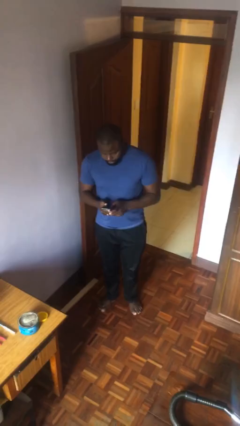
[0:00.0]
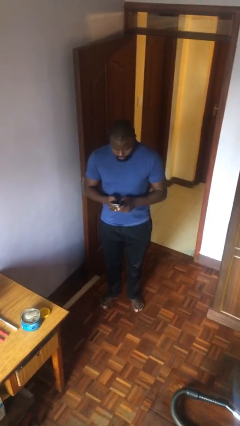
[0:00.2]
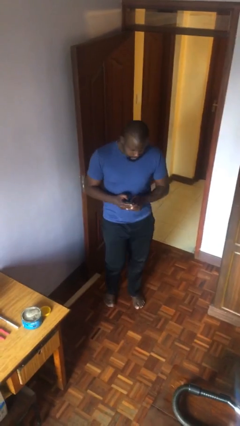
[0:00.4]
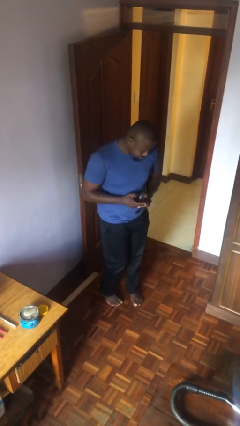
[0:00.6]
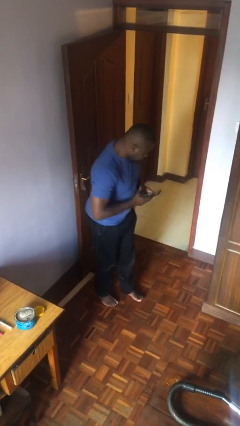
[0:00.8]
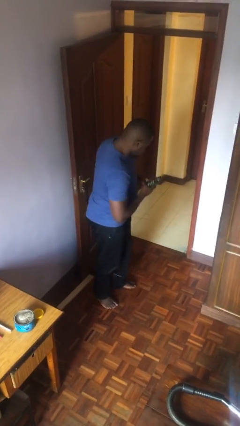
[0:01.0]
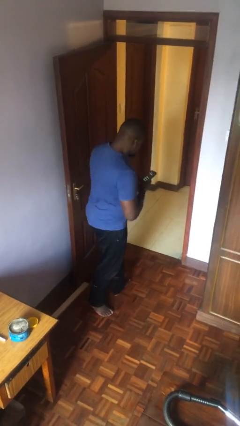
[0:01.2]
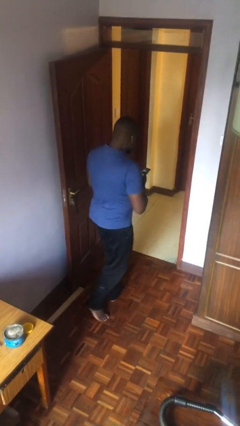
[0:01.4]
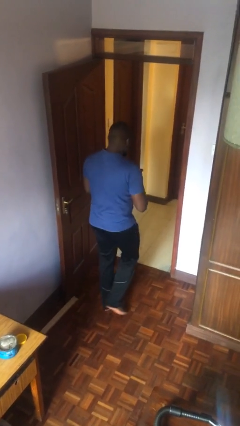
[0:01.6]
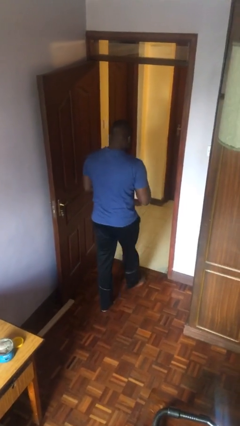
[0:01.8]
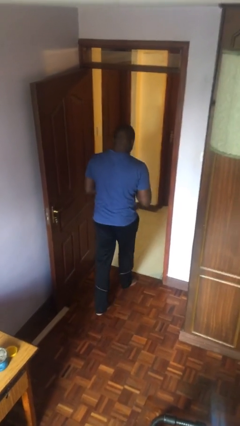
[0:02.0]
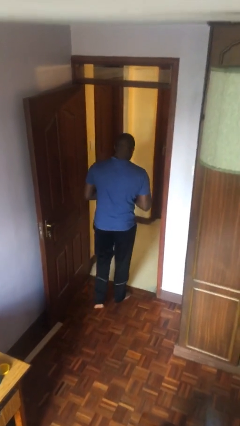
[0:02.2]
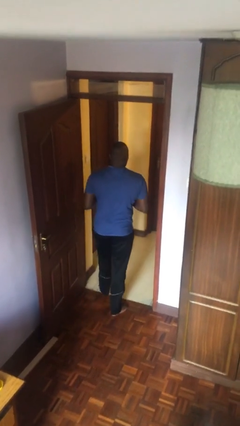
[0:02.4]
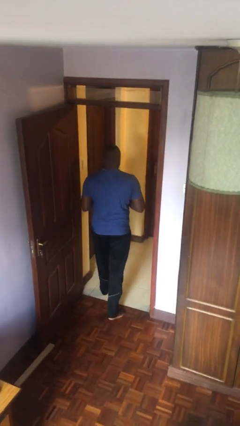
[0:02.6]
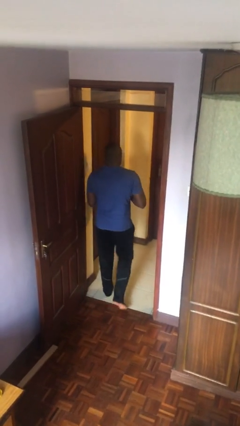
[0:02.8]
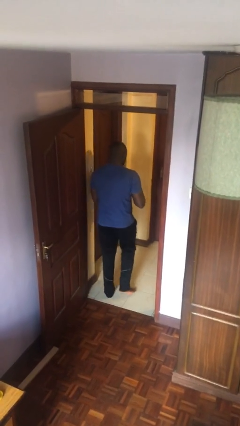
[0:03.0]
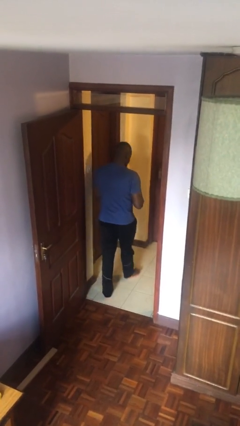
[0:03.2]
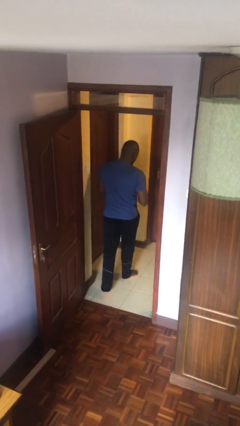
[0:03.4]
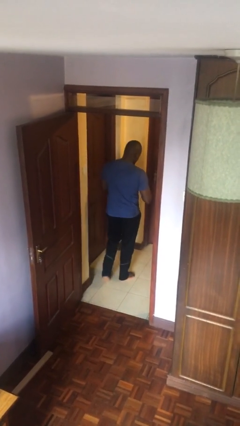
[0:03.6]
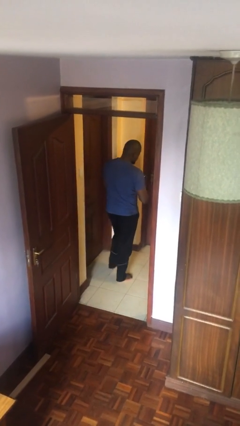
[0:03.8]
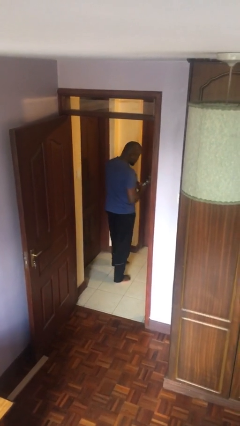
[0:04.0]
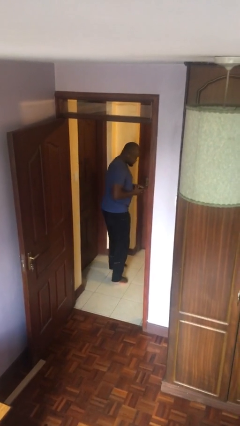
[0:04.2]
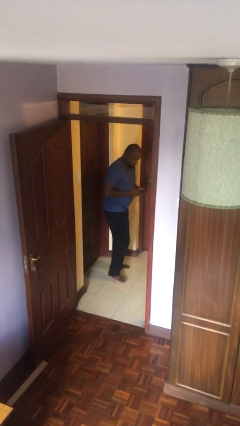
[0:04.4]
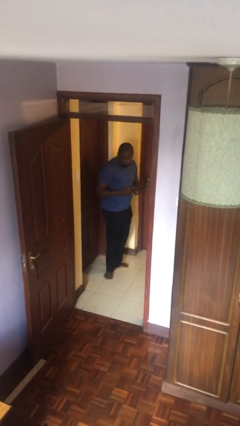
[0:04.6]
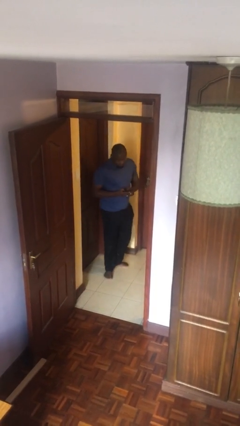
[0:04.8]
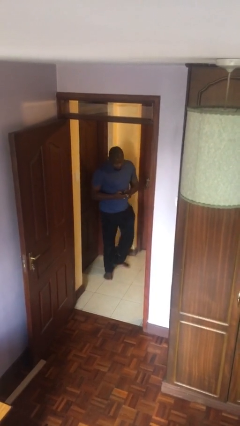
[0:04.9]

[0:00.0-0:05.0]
person exits scene through structure

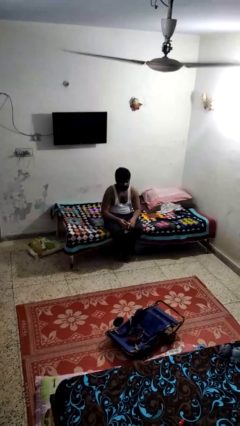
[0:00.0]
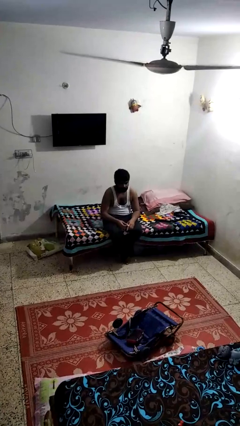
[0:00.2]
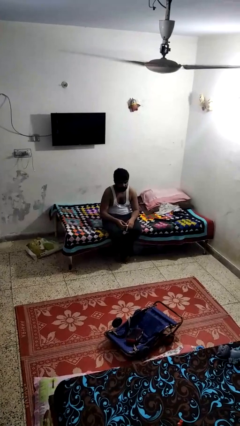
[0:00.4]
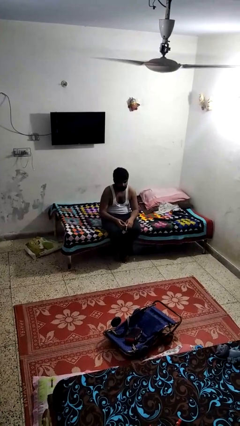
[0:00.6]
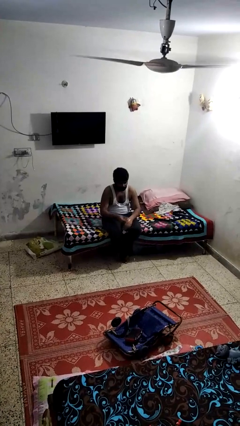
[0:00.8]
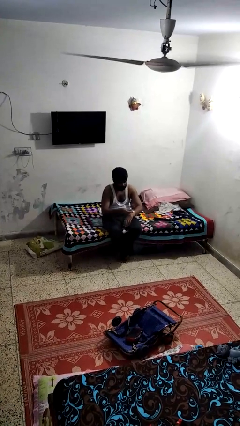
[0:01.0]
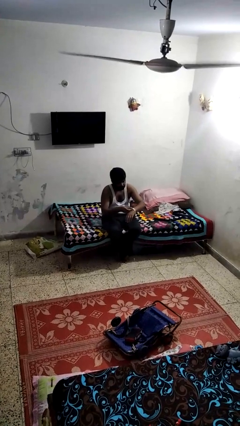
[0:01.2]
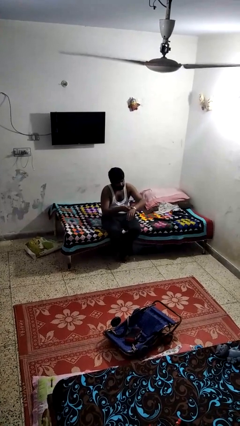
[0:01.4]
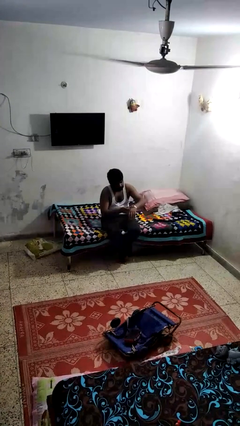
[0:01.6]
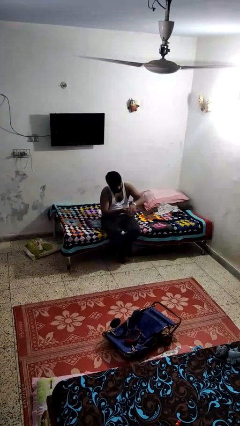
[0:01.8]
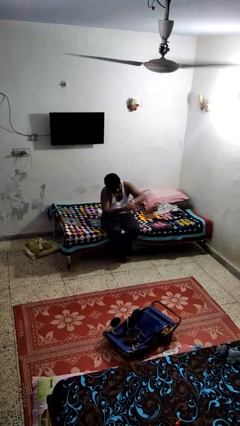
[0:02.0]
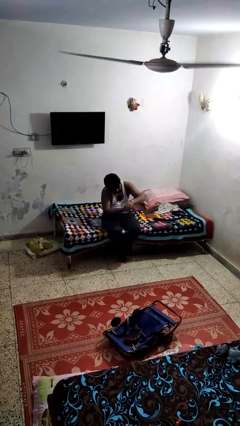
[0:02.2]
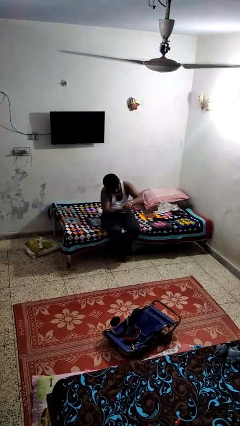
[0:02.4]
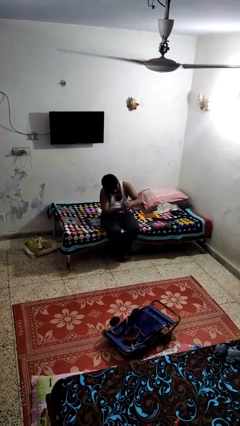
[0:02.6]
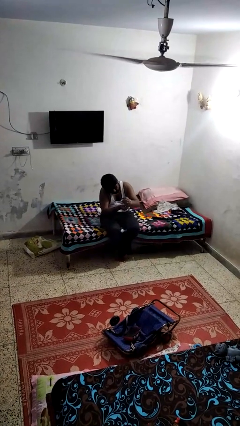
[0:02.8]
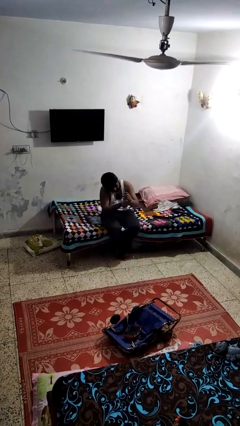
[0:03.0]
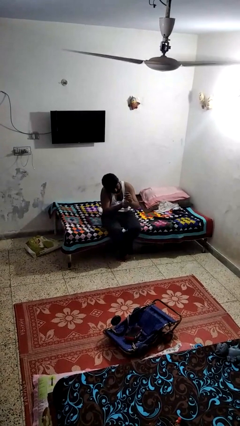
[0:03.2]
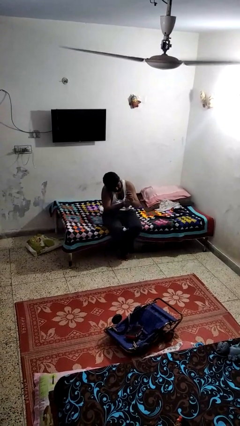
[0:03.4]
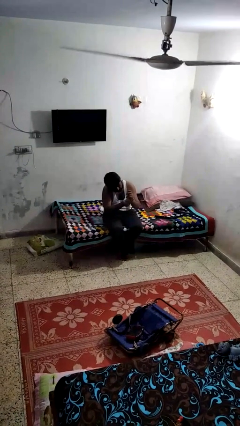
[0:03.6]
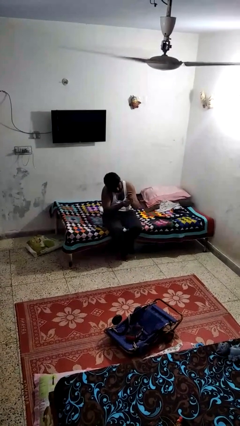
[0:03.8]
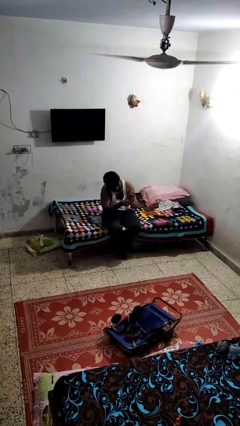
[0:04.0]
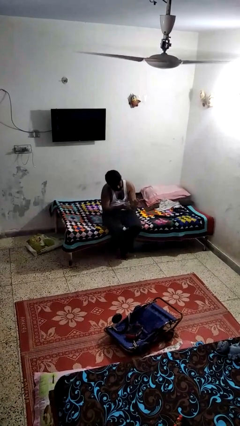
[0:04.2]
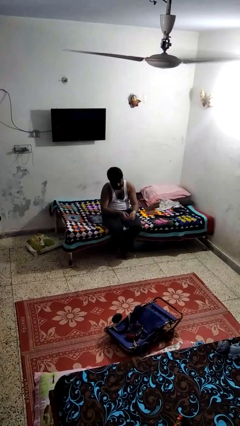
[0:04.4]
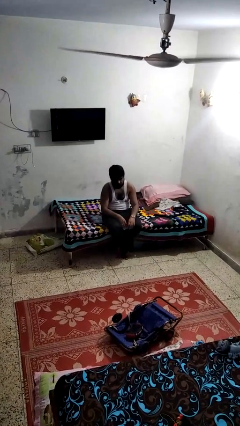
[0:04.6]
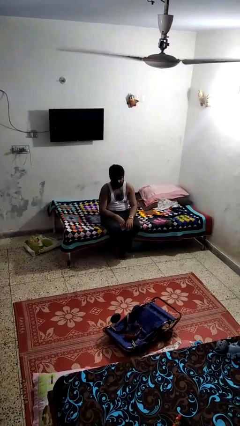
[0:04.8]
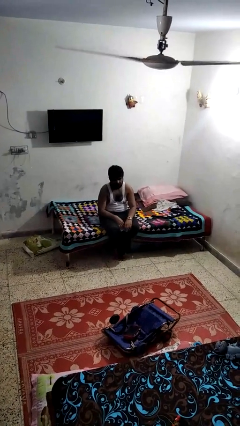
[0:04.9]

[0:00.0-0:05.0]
person puts on wristwatch

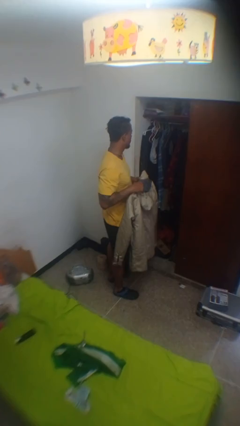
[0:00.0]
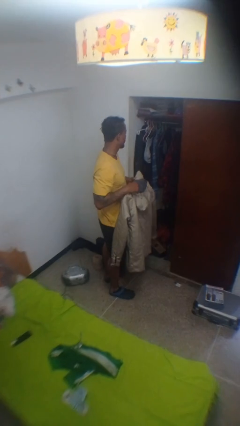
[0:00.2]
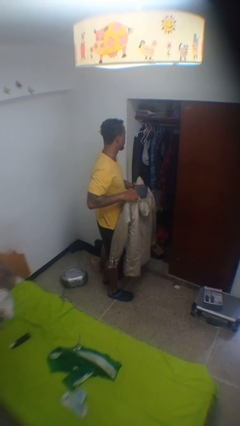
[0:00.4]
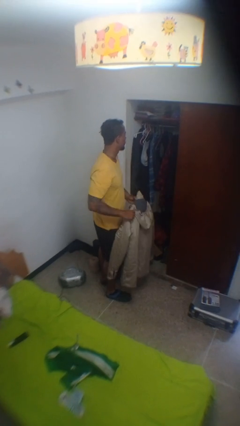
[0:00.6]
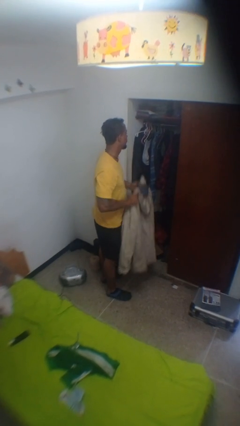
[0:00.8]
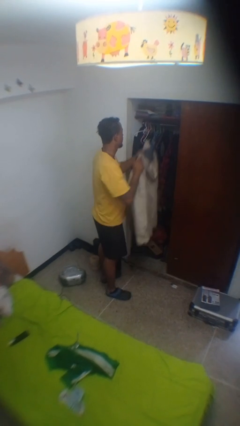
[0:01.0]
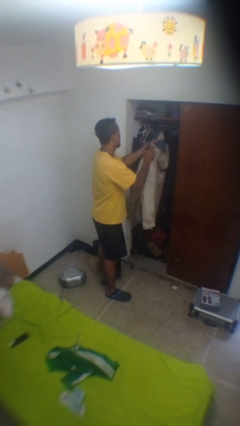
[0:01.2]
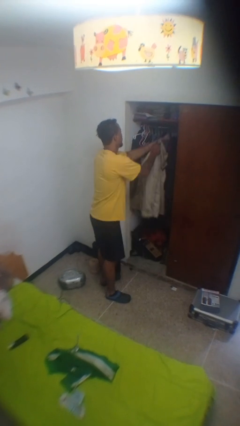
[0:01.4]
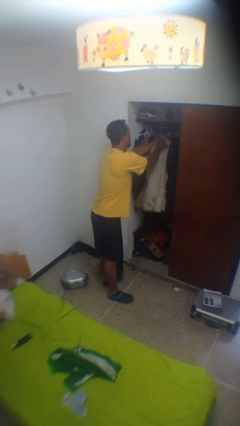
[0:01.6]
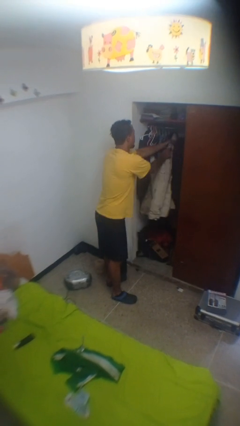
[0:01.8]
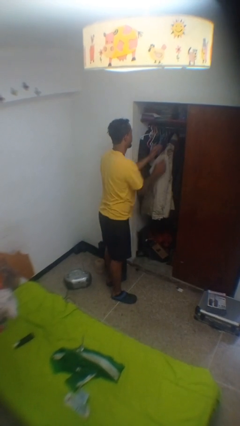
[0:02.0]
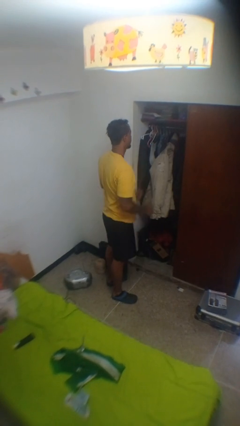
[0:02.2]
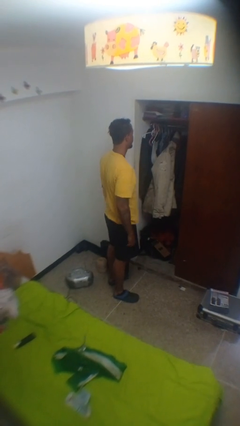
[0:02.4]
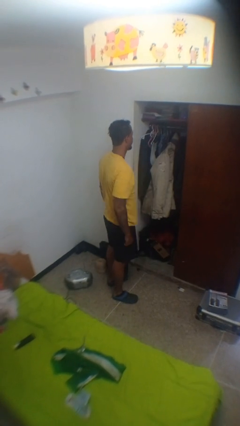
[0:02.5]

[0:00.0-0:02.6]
person puts clothes into closet

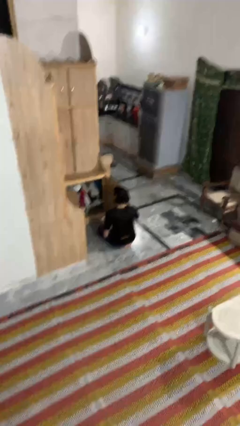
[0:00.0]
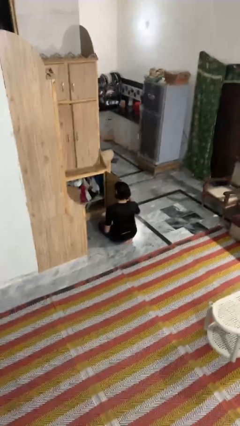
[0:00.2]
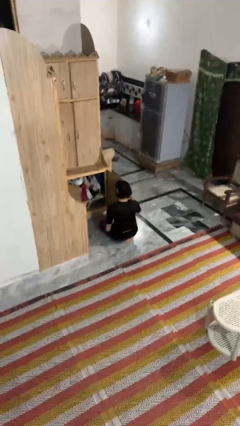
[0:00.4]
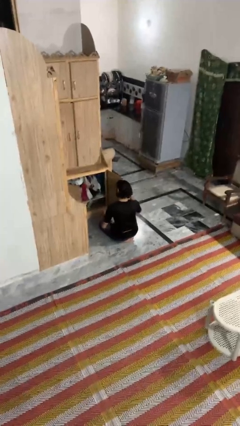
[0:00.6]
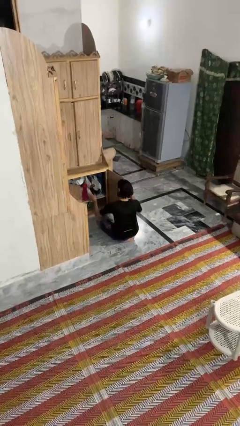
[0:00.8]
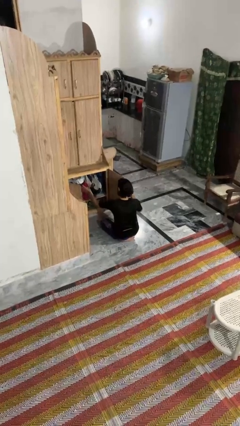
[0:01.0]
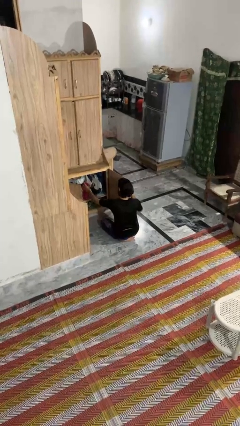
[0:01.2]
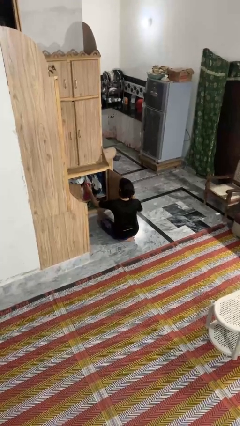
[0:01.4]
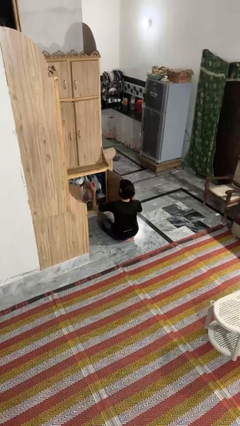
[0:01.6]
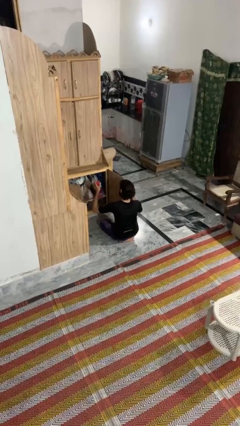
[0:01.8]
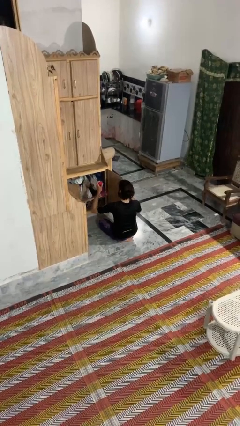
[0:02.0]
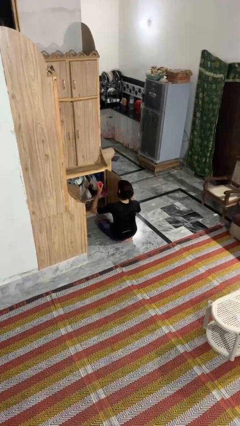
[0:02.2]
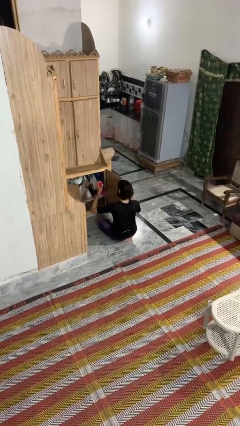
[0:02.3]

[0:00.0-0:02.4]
person picks up object from cabinet

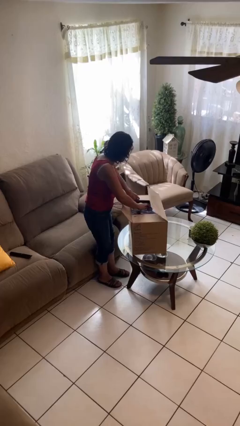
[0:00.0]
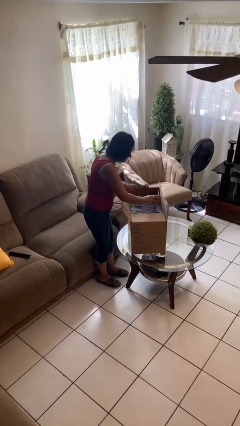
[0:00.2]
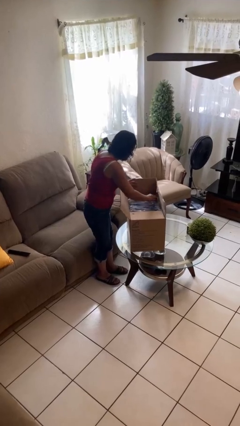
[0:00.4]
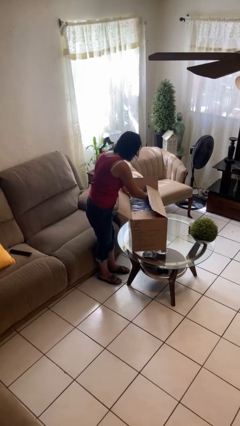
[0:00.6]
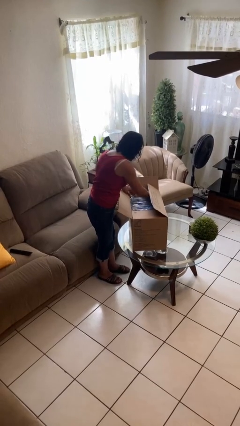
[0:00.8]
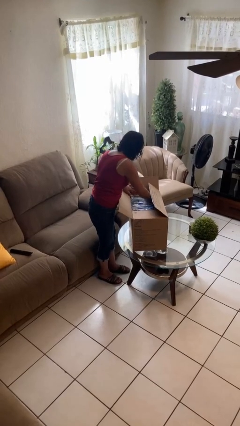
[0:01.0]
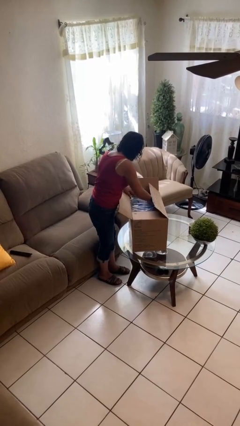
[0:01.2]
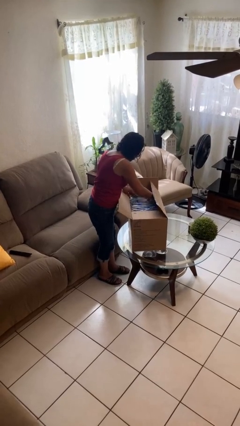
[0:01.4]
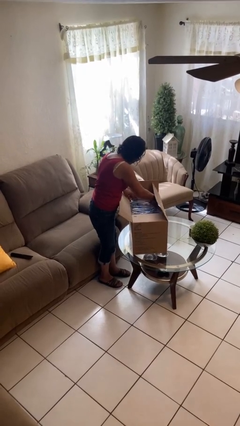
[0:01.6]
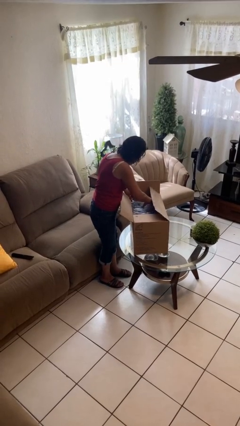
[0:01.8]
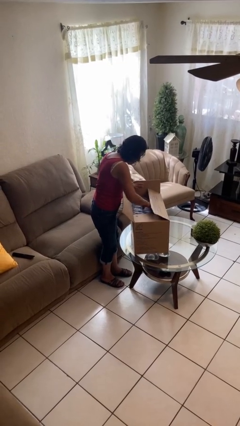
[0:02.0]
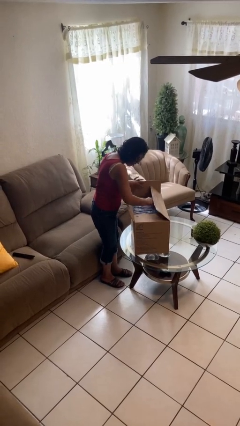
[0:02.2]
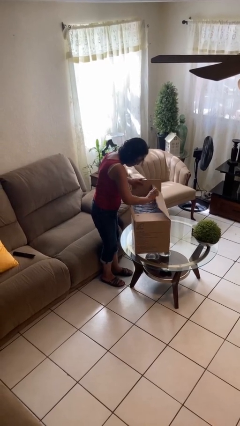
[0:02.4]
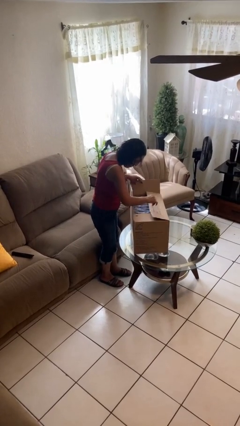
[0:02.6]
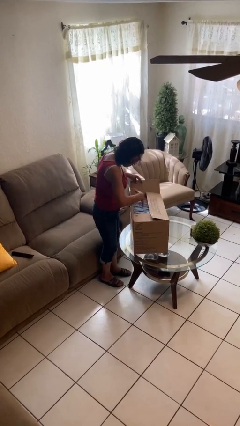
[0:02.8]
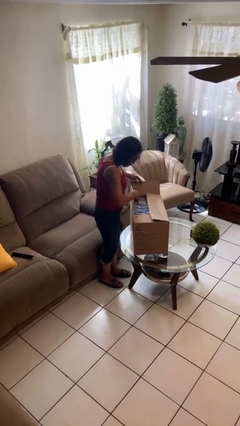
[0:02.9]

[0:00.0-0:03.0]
person searches in box
